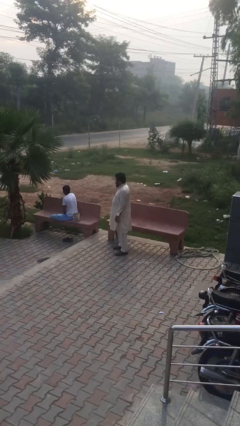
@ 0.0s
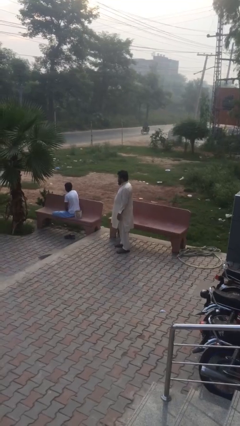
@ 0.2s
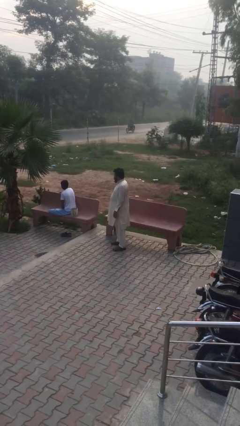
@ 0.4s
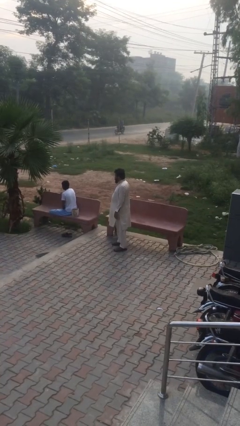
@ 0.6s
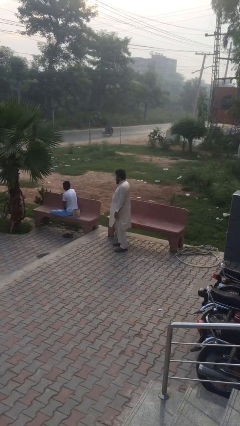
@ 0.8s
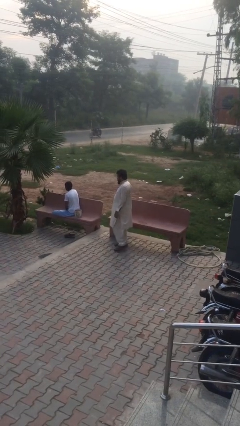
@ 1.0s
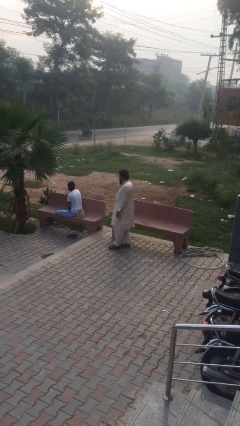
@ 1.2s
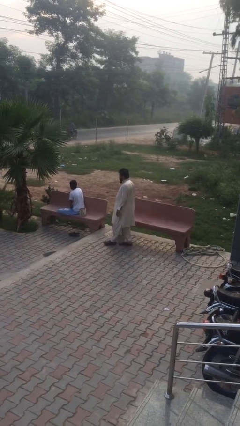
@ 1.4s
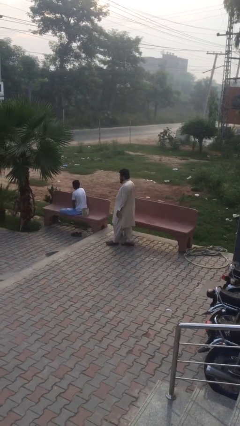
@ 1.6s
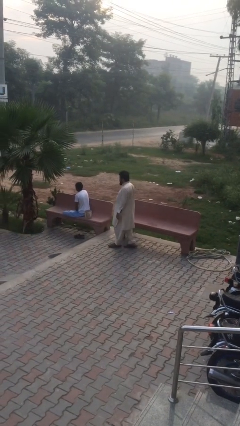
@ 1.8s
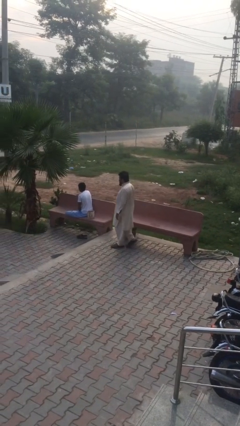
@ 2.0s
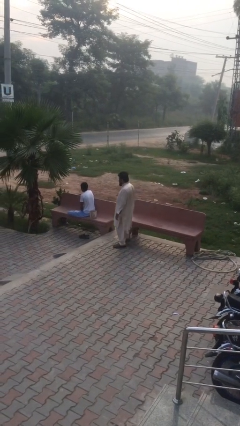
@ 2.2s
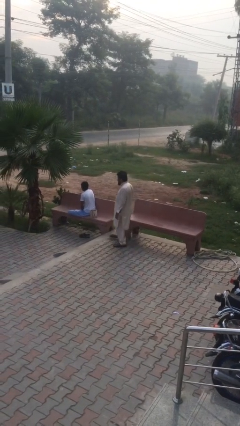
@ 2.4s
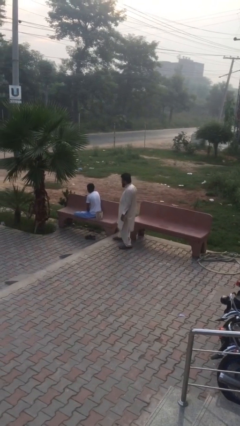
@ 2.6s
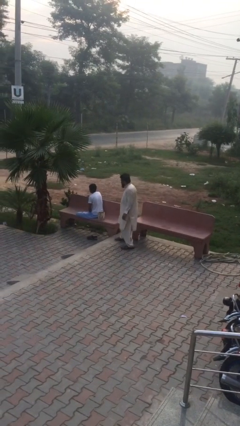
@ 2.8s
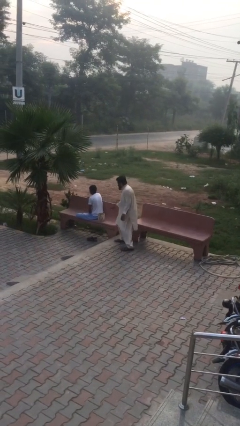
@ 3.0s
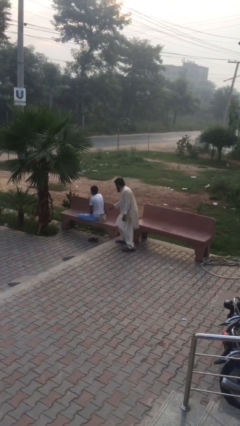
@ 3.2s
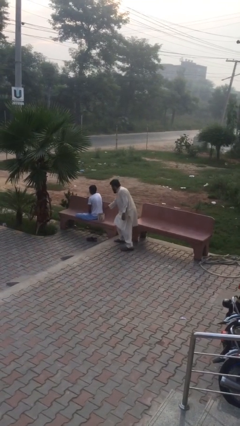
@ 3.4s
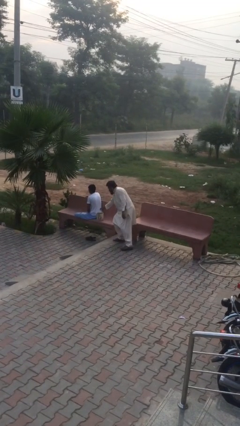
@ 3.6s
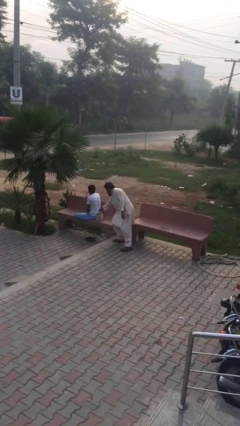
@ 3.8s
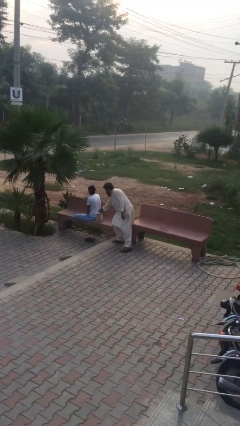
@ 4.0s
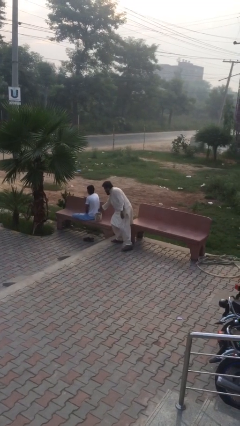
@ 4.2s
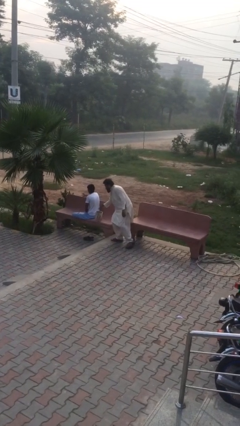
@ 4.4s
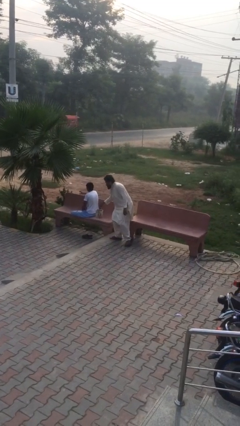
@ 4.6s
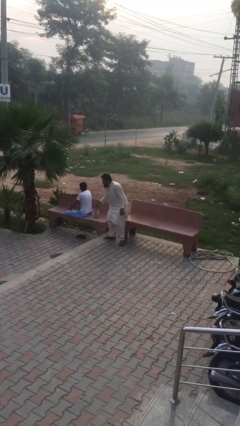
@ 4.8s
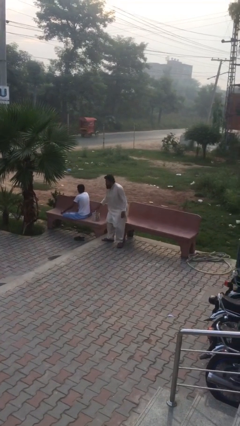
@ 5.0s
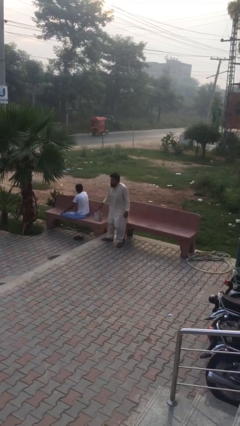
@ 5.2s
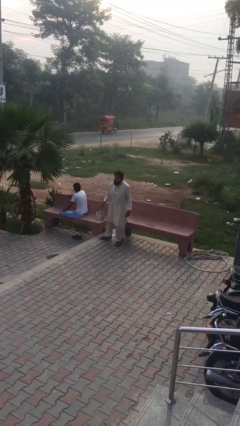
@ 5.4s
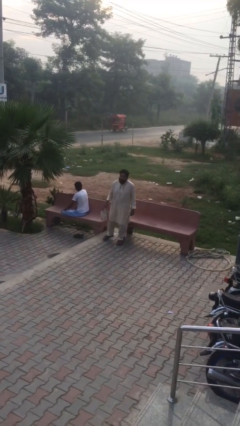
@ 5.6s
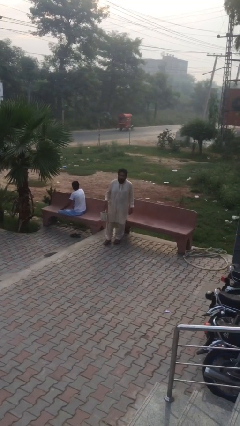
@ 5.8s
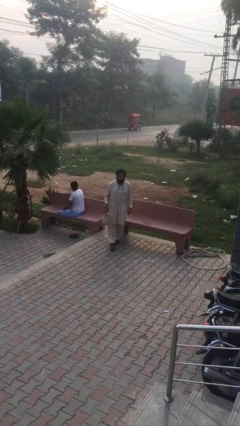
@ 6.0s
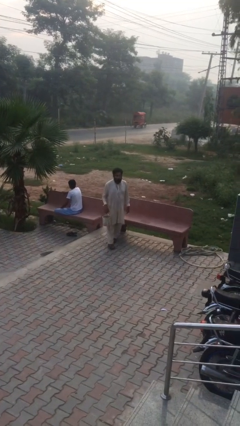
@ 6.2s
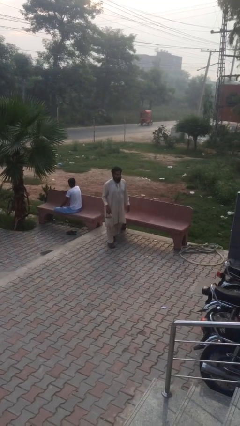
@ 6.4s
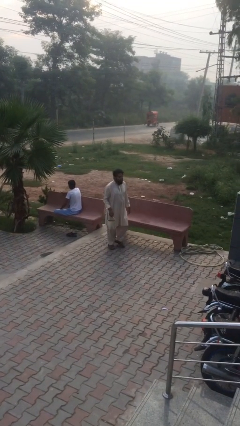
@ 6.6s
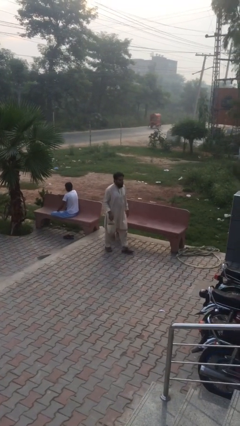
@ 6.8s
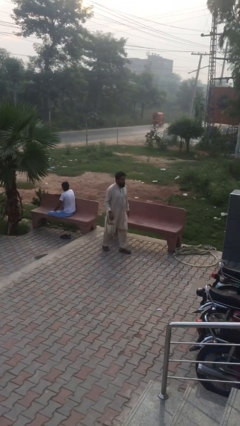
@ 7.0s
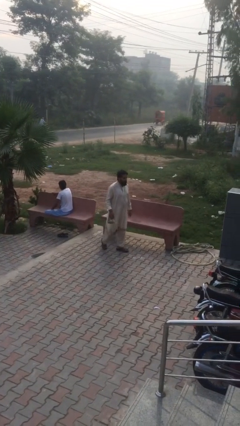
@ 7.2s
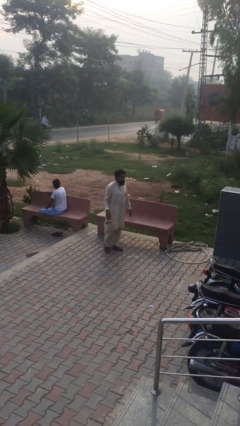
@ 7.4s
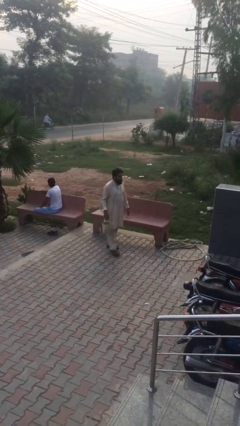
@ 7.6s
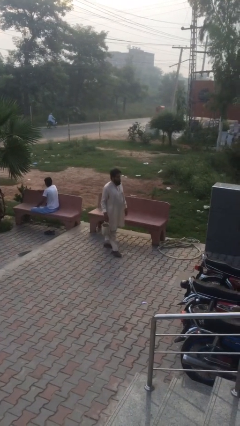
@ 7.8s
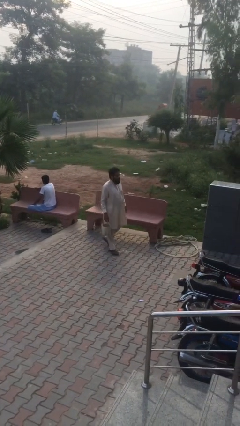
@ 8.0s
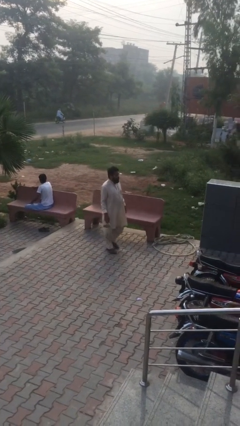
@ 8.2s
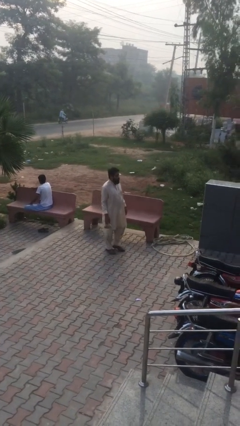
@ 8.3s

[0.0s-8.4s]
person steals object from person

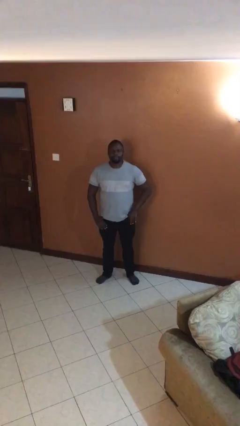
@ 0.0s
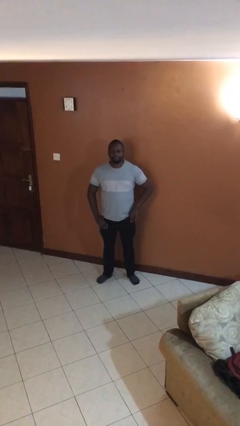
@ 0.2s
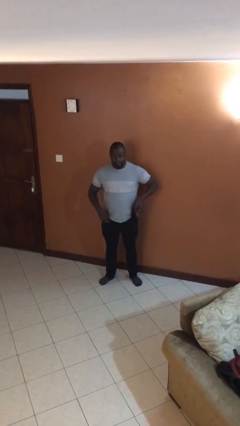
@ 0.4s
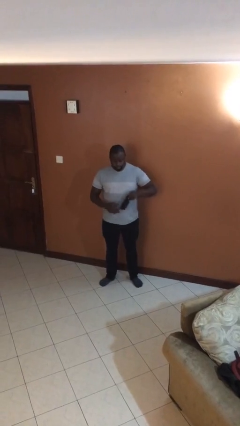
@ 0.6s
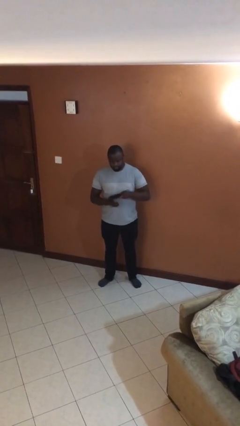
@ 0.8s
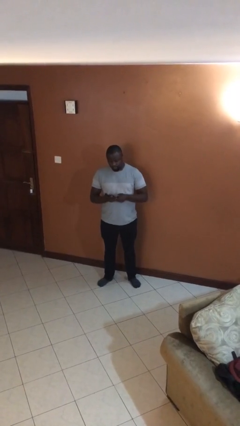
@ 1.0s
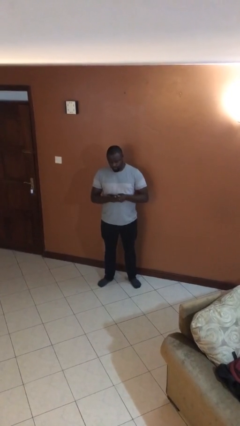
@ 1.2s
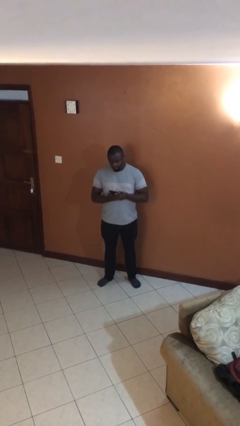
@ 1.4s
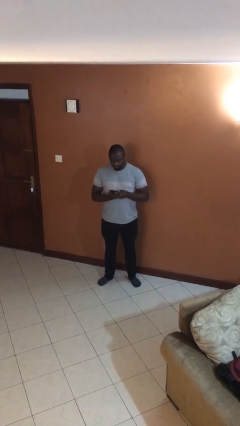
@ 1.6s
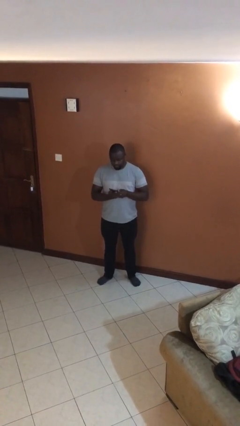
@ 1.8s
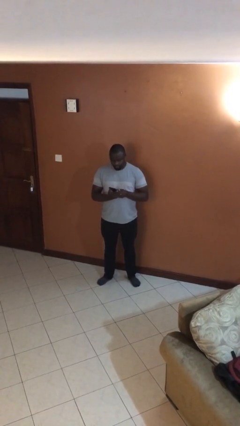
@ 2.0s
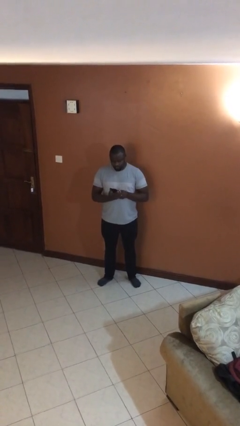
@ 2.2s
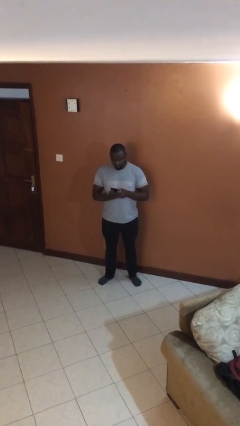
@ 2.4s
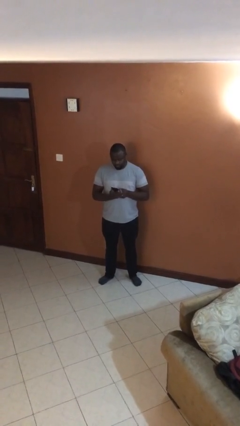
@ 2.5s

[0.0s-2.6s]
person takes phone from pocket

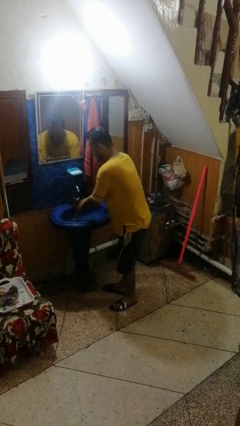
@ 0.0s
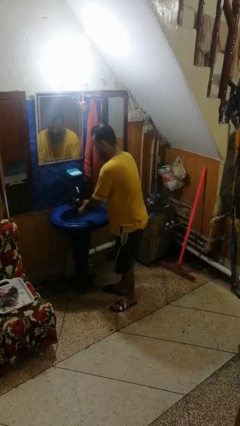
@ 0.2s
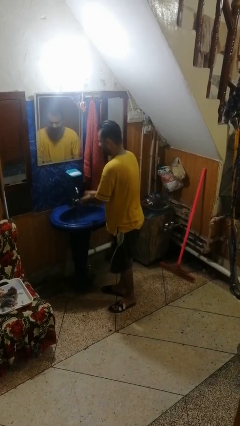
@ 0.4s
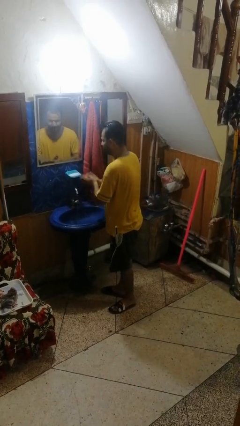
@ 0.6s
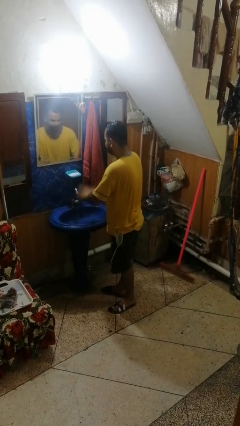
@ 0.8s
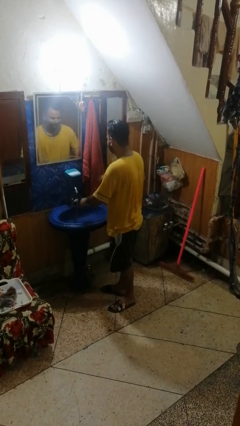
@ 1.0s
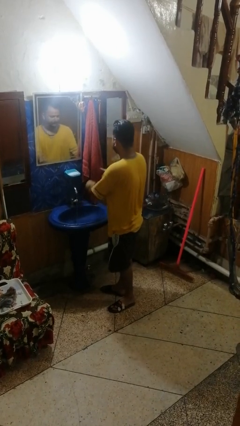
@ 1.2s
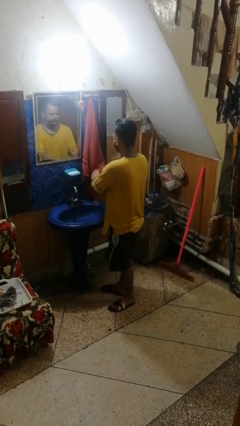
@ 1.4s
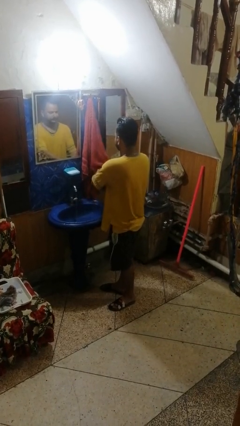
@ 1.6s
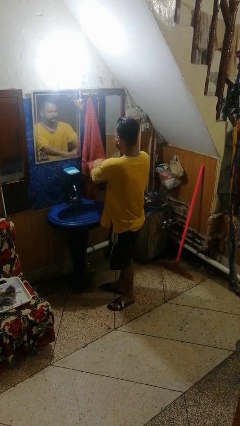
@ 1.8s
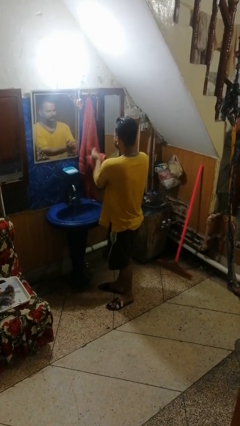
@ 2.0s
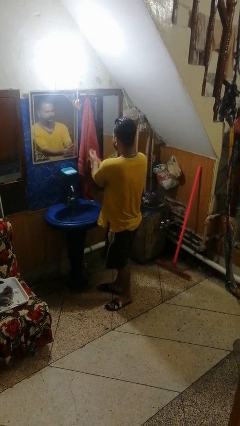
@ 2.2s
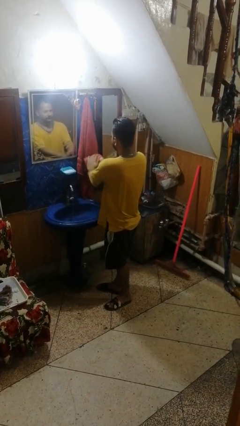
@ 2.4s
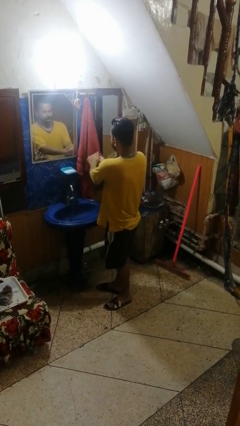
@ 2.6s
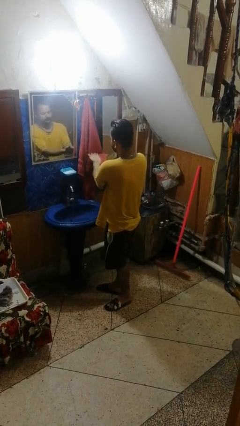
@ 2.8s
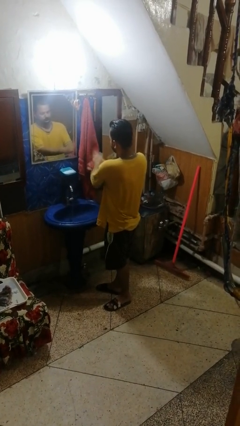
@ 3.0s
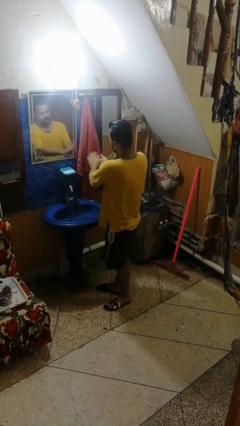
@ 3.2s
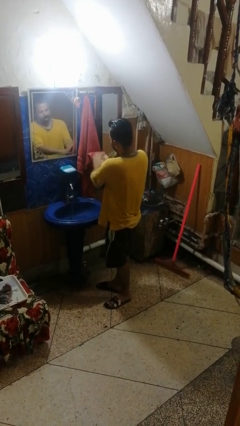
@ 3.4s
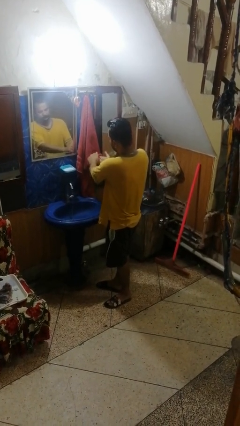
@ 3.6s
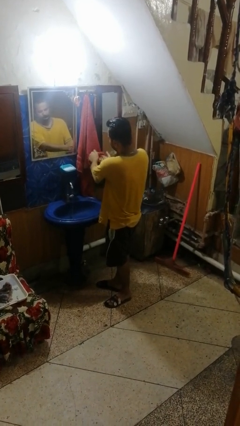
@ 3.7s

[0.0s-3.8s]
person dries hands with towel

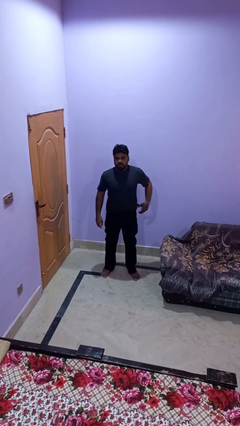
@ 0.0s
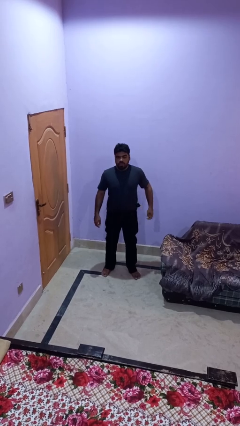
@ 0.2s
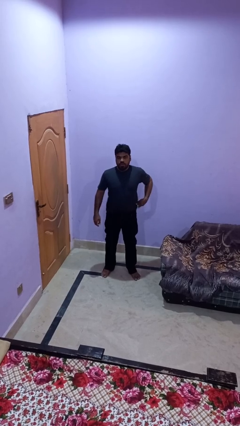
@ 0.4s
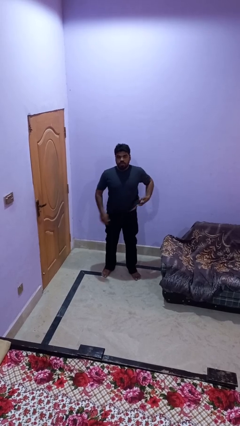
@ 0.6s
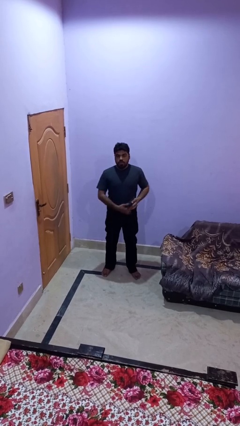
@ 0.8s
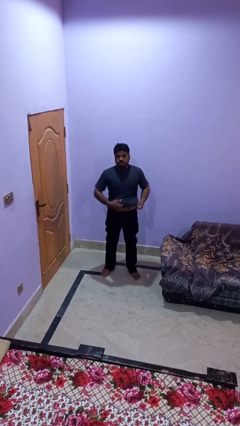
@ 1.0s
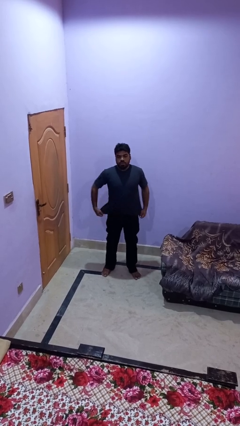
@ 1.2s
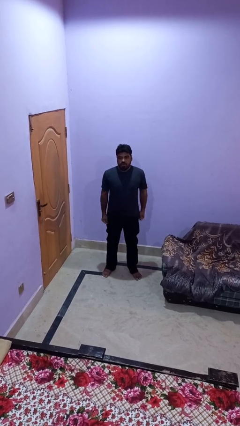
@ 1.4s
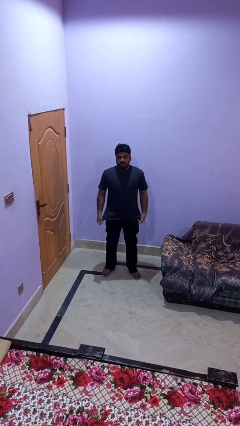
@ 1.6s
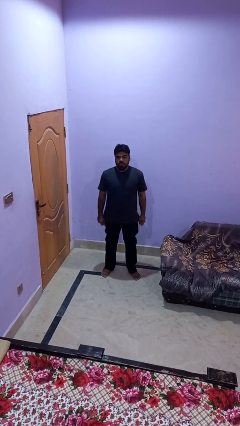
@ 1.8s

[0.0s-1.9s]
person untucks shirt

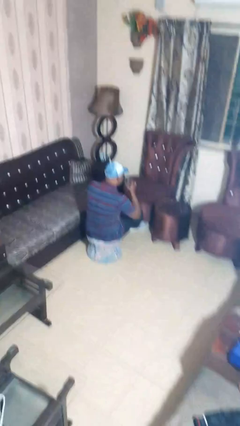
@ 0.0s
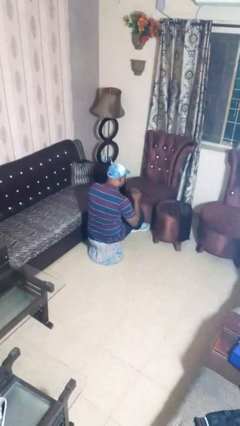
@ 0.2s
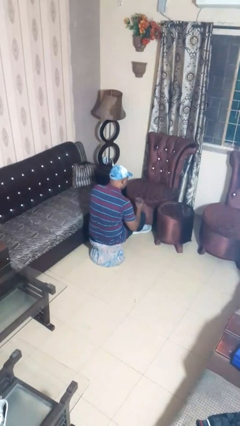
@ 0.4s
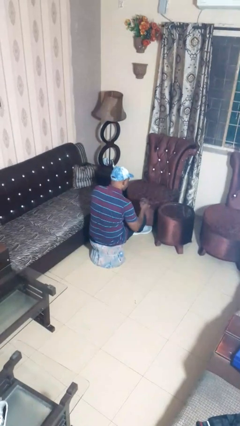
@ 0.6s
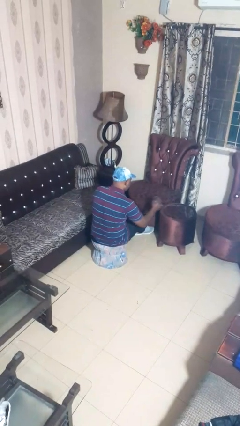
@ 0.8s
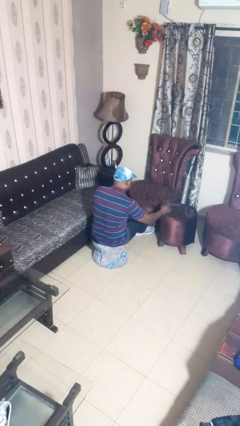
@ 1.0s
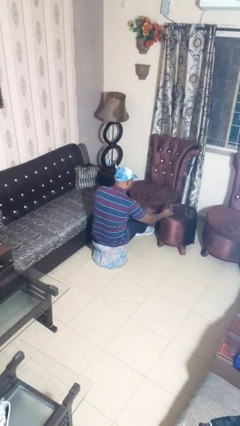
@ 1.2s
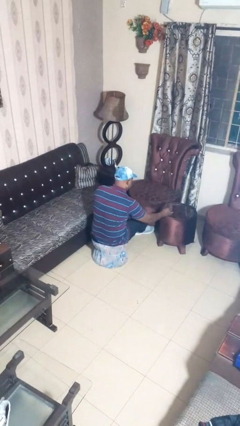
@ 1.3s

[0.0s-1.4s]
person puts down object on table
